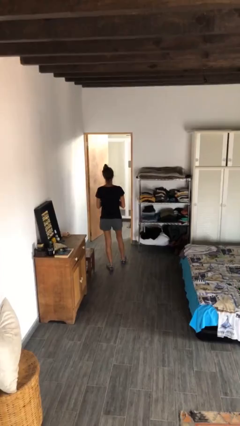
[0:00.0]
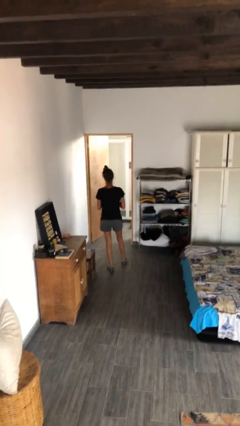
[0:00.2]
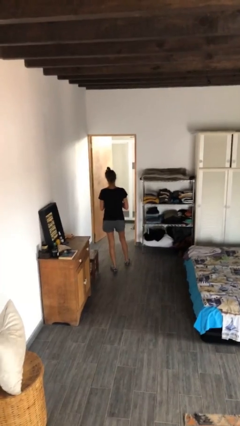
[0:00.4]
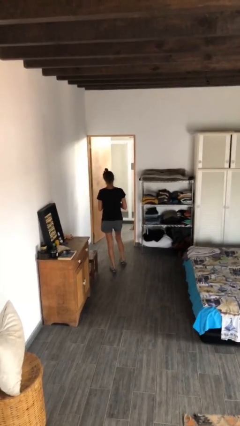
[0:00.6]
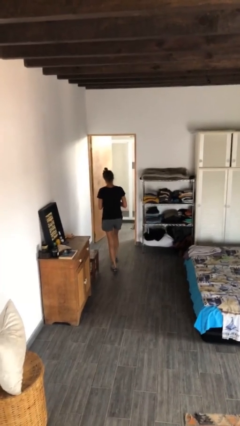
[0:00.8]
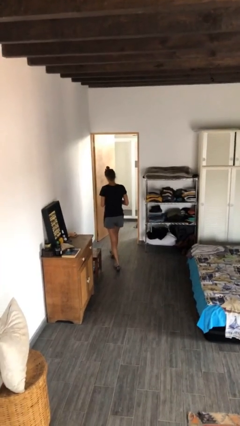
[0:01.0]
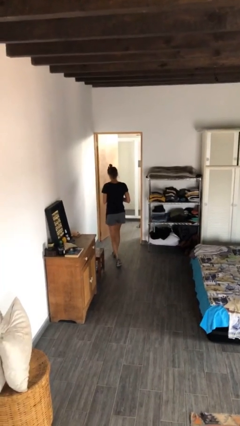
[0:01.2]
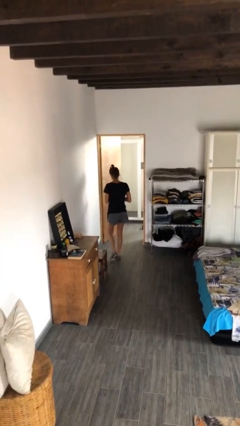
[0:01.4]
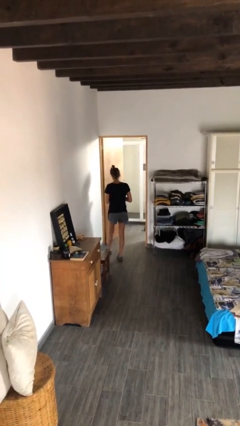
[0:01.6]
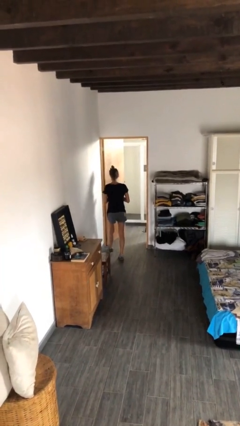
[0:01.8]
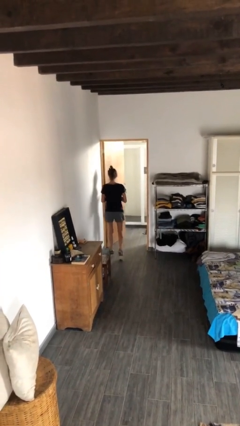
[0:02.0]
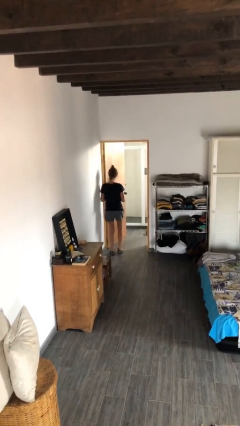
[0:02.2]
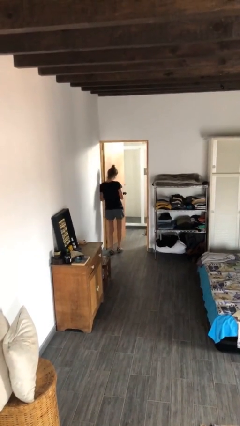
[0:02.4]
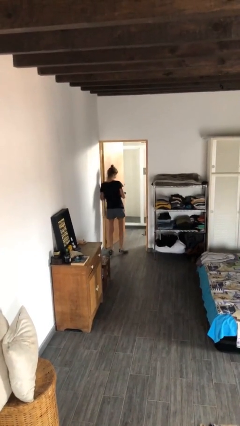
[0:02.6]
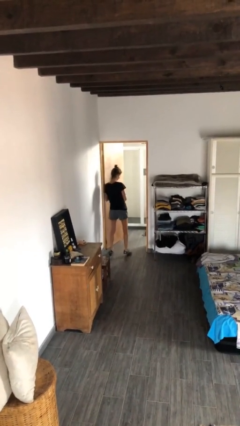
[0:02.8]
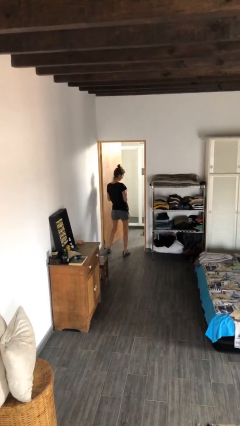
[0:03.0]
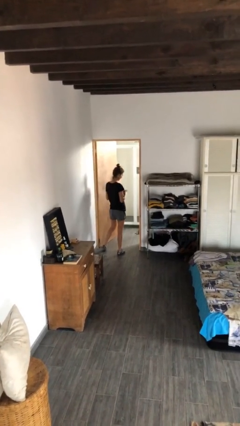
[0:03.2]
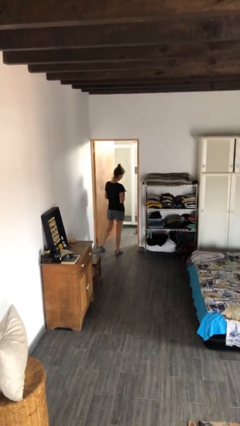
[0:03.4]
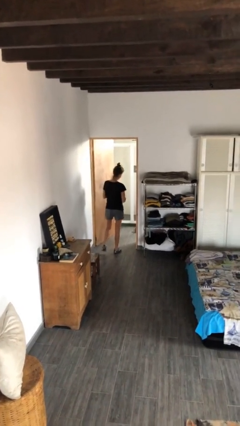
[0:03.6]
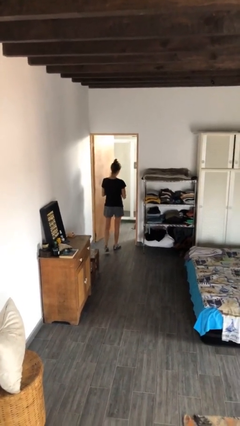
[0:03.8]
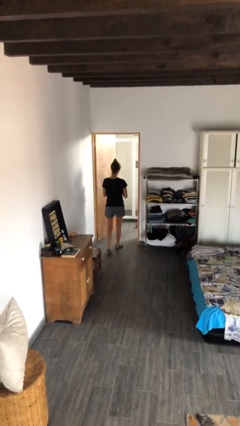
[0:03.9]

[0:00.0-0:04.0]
person bumps into wall

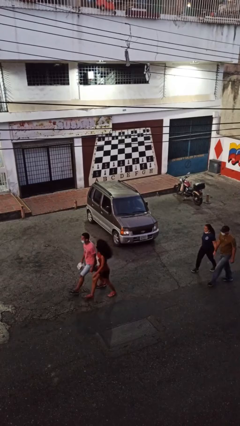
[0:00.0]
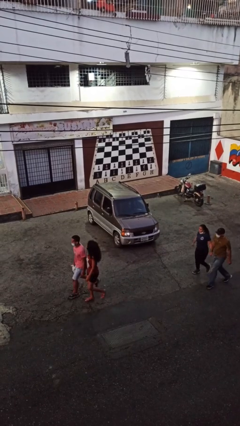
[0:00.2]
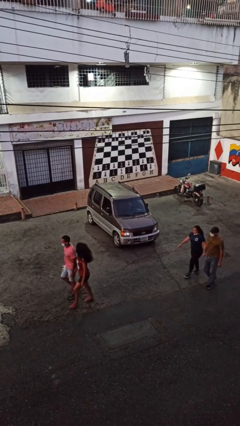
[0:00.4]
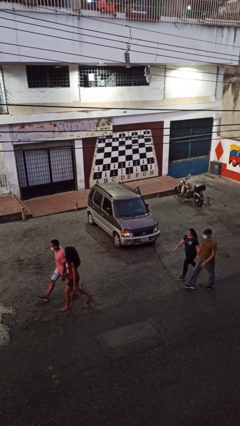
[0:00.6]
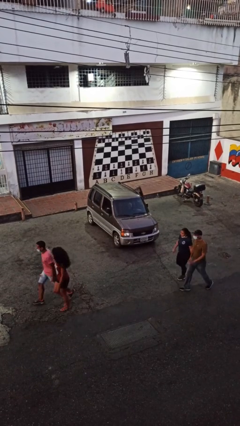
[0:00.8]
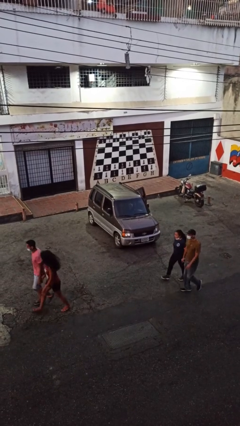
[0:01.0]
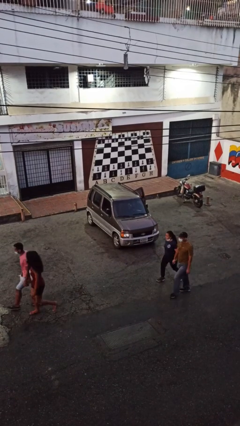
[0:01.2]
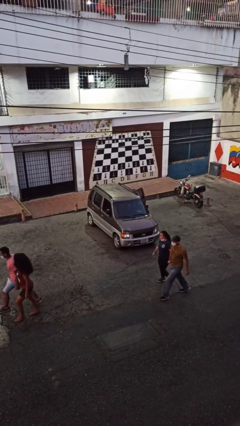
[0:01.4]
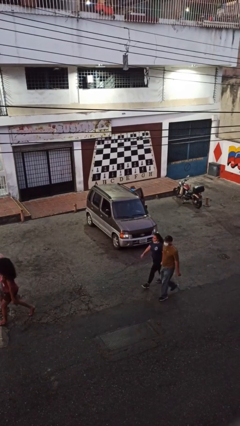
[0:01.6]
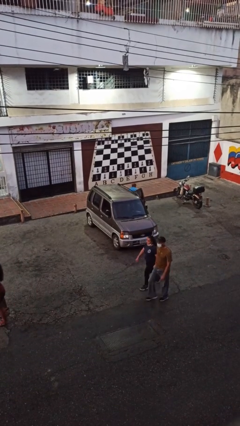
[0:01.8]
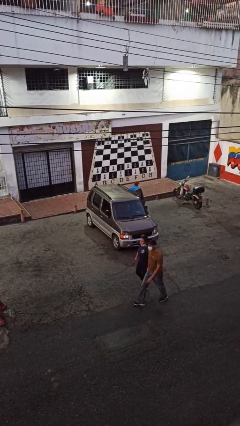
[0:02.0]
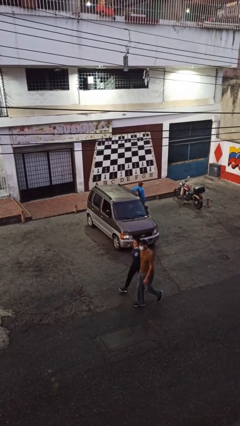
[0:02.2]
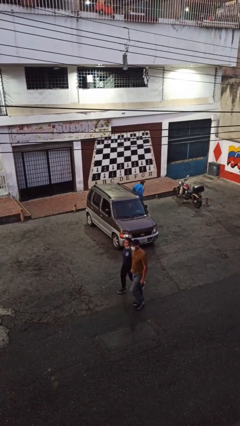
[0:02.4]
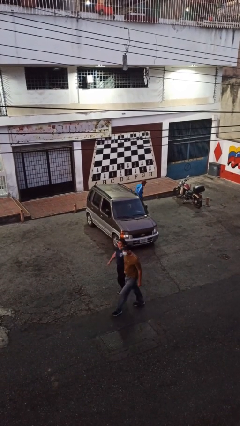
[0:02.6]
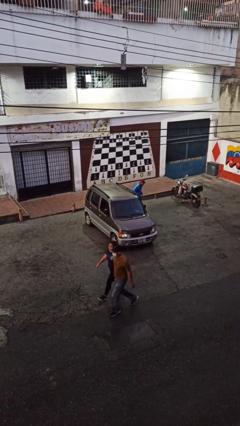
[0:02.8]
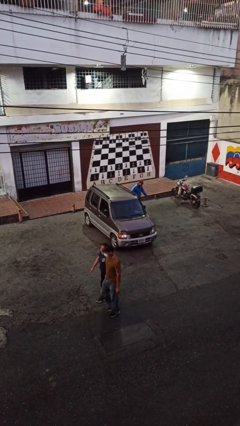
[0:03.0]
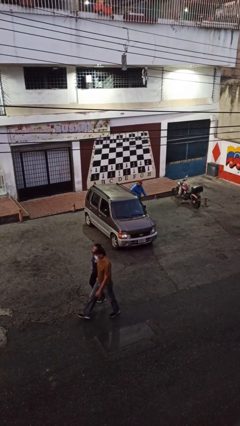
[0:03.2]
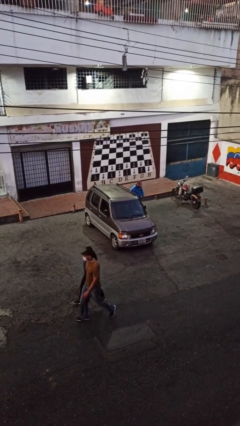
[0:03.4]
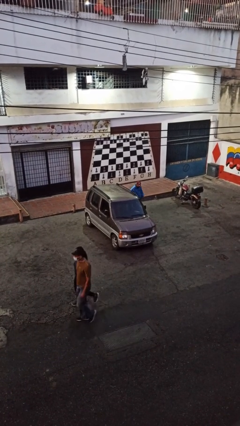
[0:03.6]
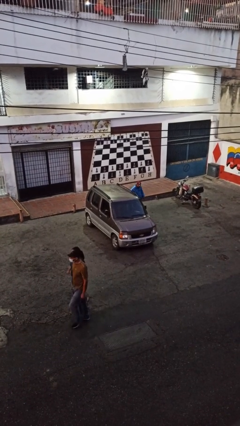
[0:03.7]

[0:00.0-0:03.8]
car drops off person

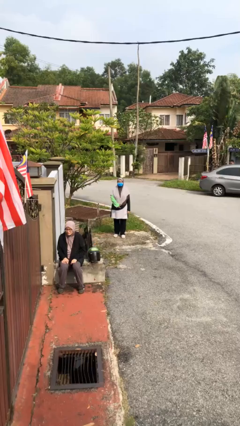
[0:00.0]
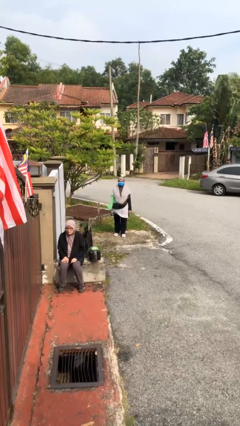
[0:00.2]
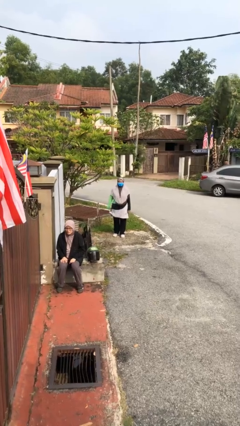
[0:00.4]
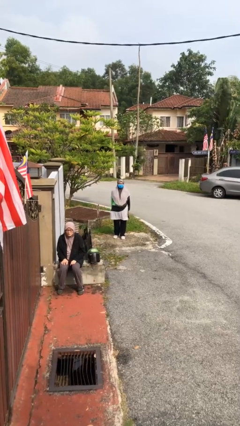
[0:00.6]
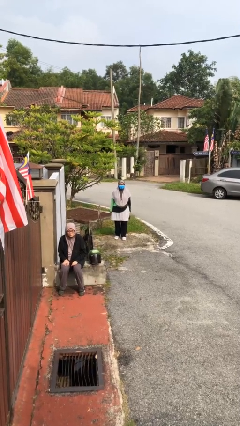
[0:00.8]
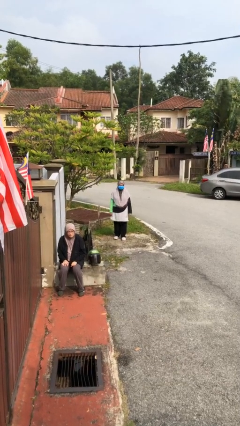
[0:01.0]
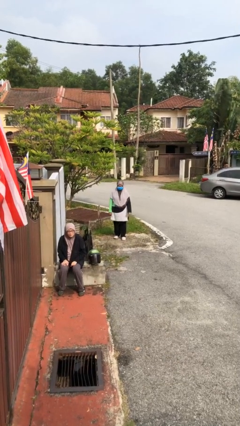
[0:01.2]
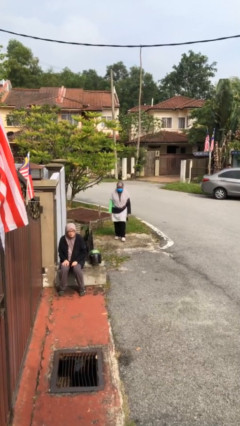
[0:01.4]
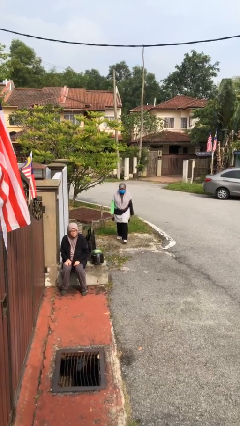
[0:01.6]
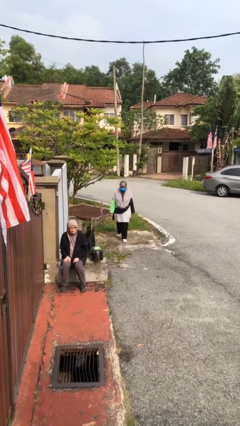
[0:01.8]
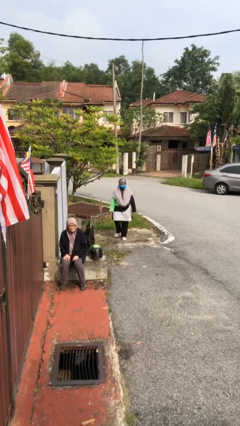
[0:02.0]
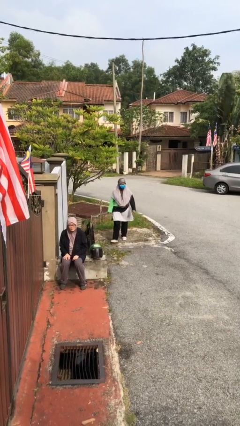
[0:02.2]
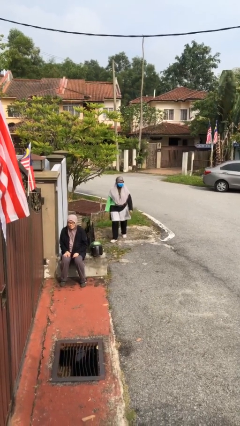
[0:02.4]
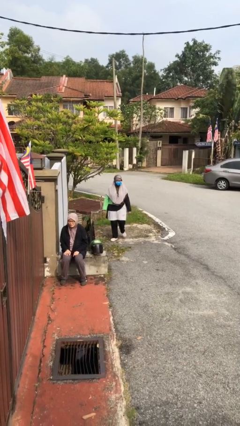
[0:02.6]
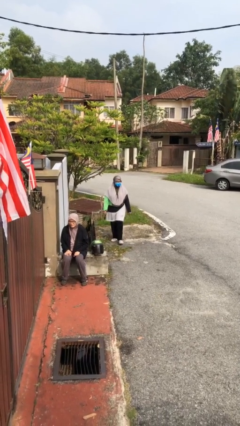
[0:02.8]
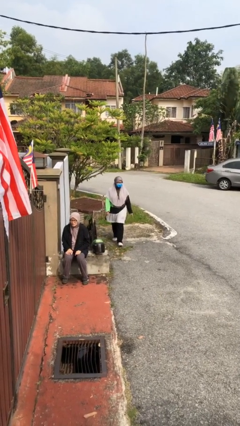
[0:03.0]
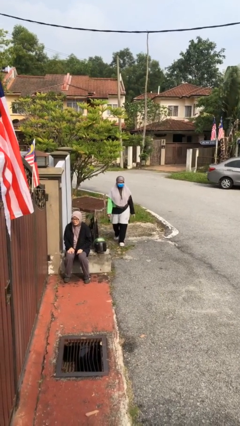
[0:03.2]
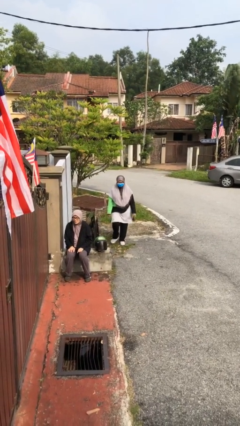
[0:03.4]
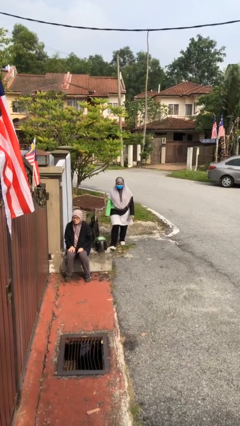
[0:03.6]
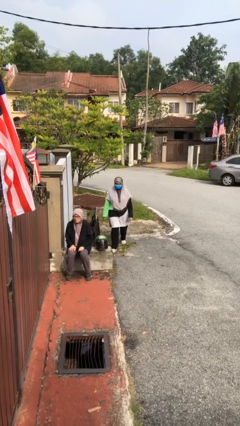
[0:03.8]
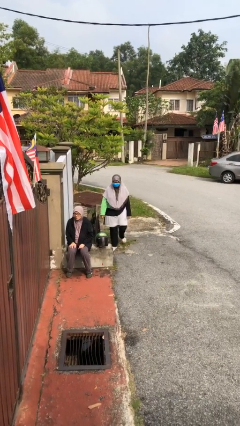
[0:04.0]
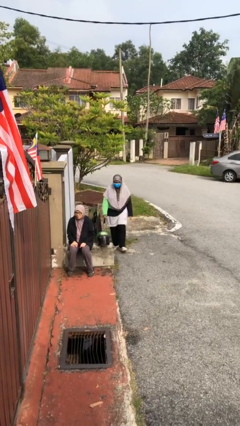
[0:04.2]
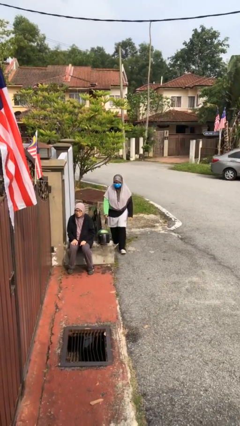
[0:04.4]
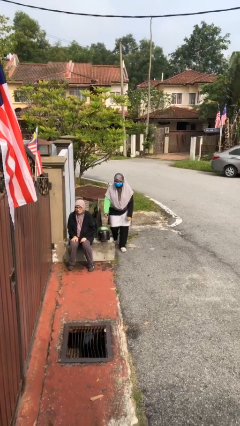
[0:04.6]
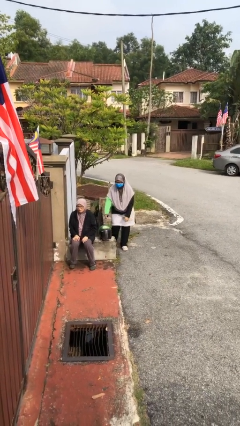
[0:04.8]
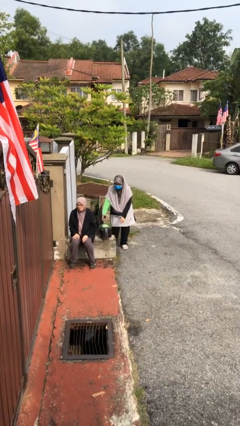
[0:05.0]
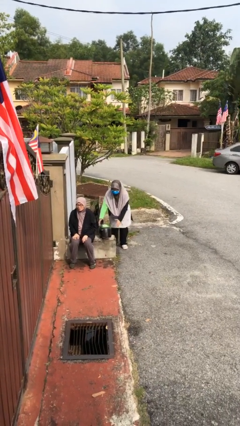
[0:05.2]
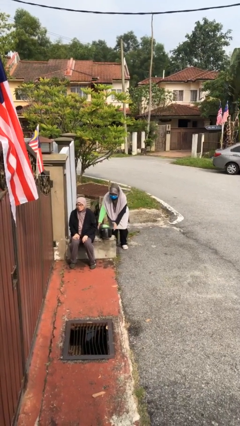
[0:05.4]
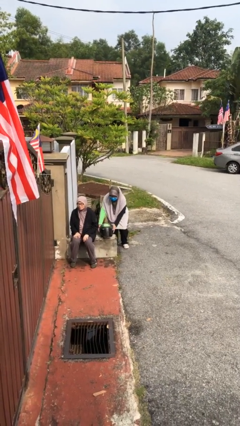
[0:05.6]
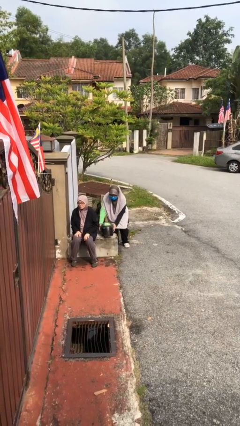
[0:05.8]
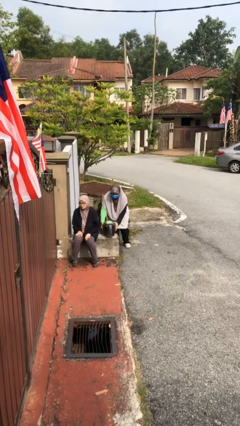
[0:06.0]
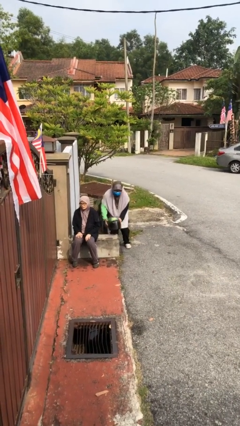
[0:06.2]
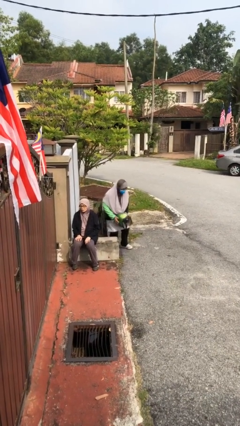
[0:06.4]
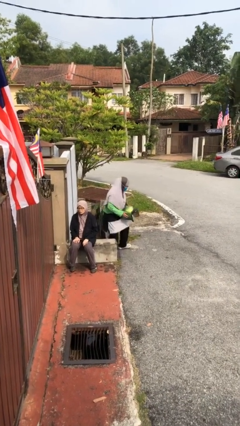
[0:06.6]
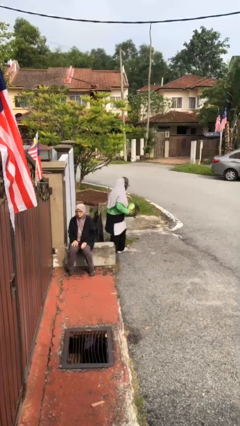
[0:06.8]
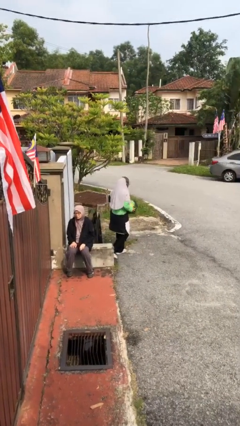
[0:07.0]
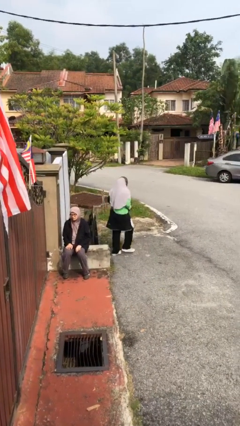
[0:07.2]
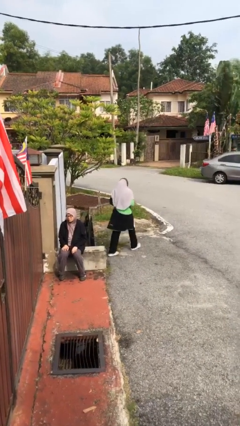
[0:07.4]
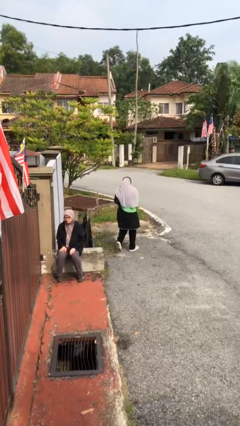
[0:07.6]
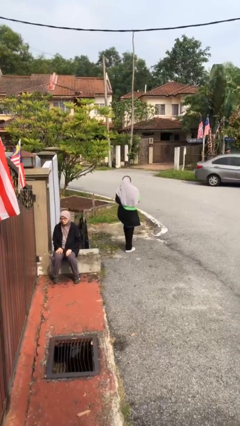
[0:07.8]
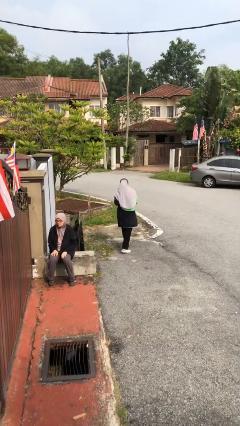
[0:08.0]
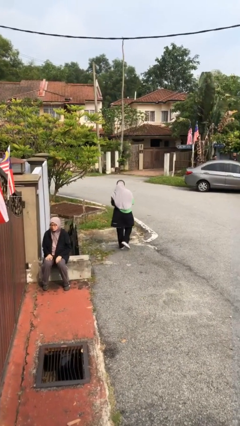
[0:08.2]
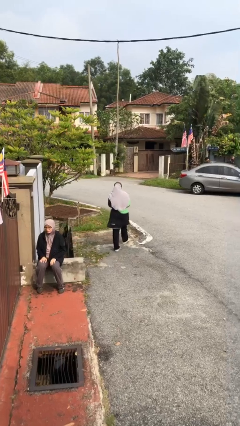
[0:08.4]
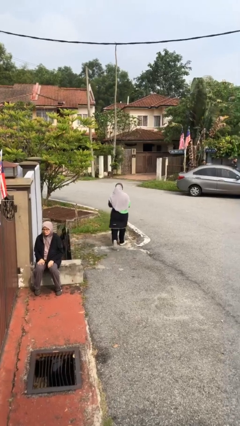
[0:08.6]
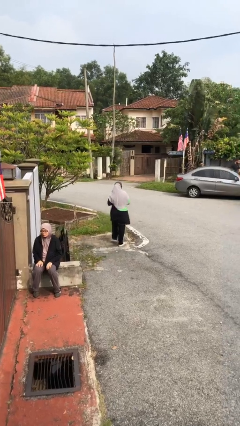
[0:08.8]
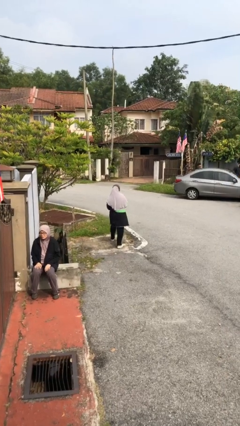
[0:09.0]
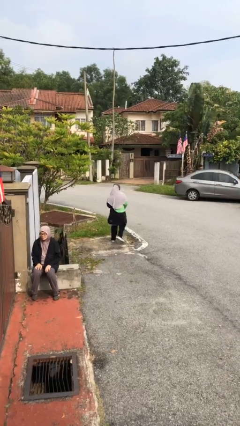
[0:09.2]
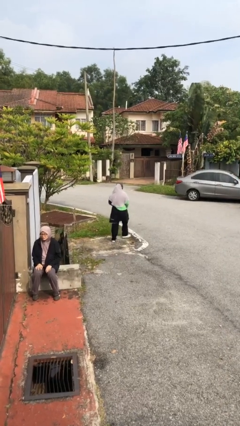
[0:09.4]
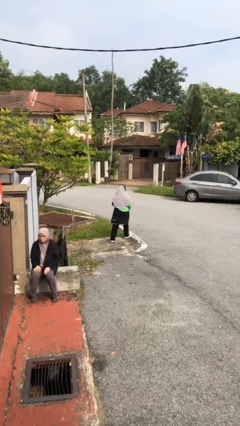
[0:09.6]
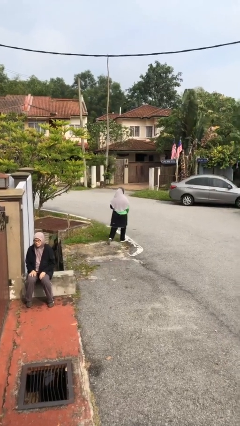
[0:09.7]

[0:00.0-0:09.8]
person steals object from person
